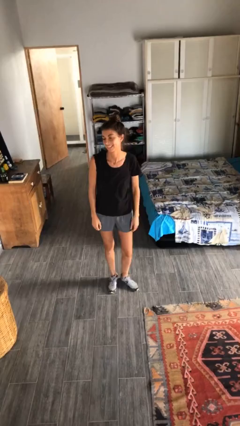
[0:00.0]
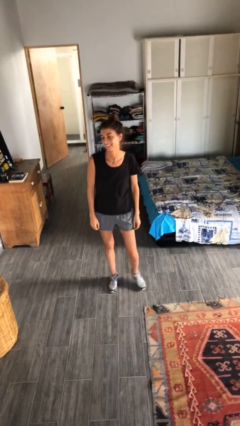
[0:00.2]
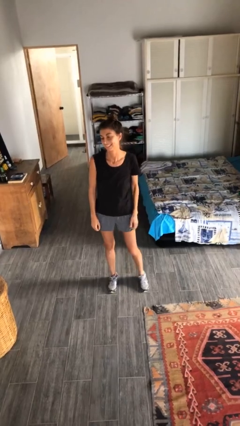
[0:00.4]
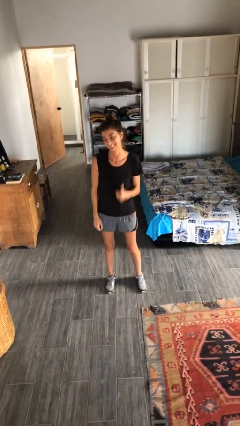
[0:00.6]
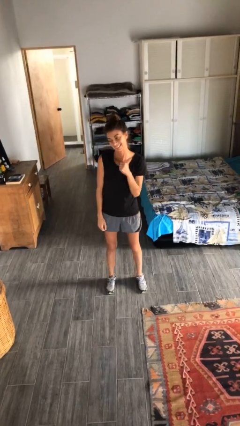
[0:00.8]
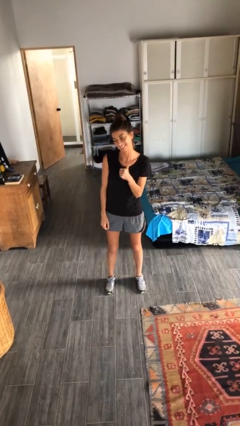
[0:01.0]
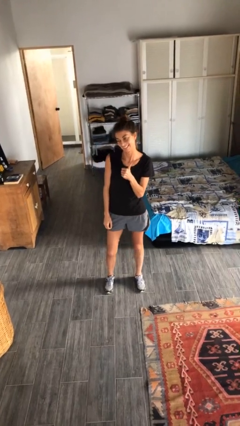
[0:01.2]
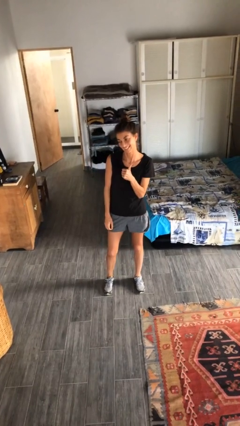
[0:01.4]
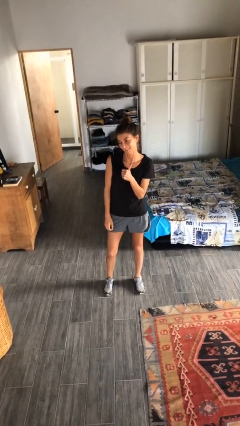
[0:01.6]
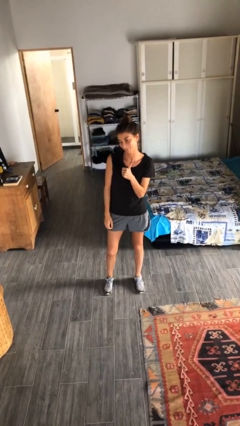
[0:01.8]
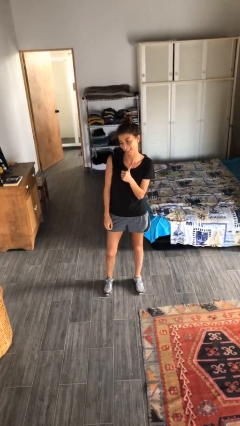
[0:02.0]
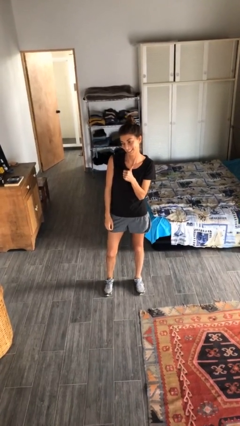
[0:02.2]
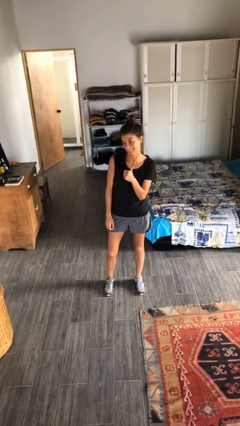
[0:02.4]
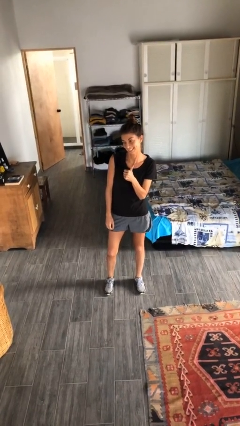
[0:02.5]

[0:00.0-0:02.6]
person gestures thumbs up

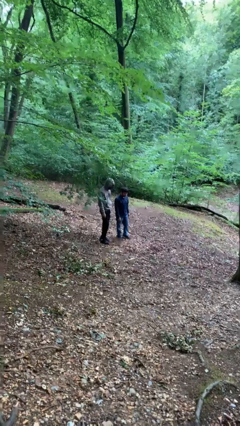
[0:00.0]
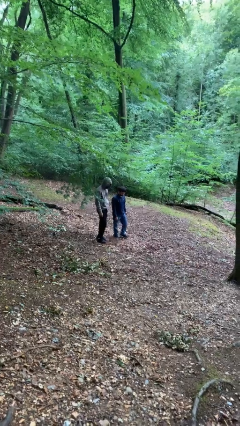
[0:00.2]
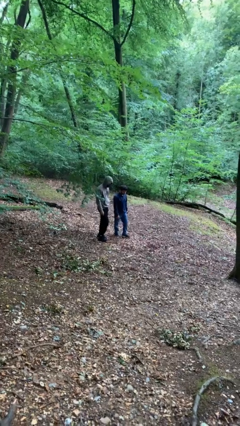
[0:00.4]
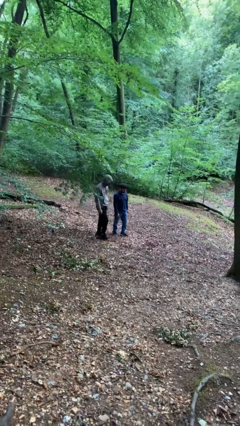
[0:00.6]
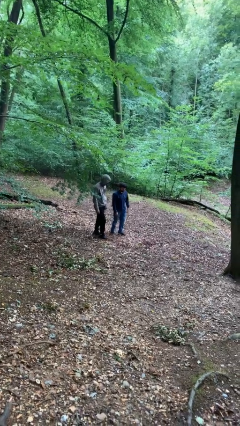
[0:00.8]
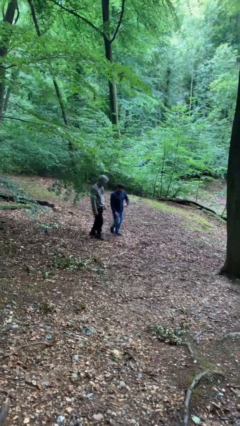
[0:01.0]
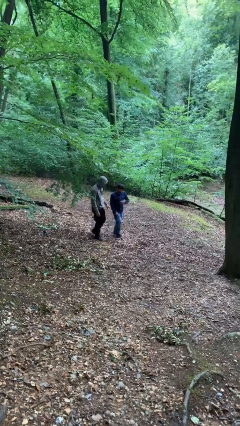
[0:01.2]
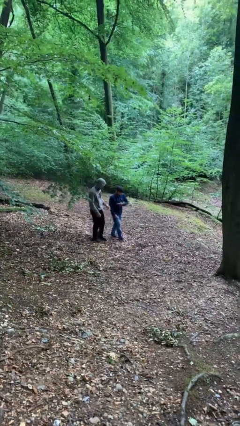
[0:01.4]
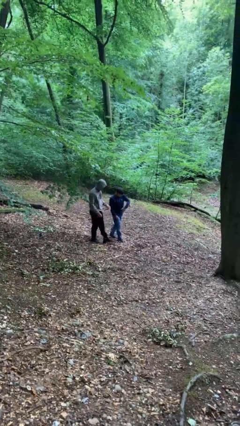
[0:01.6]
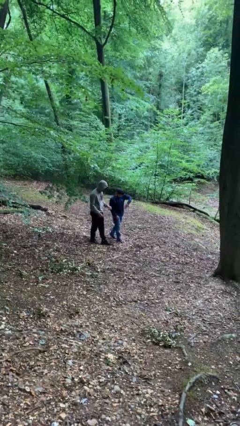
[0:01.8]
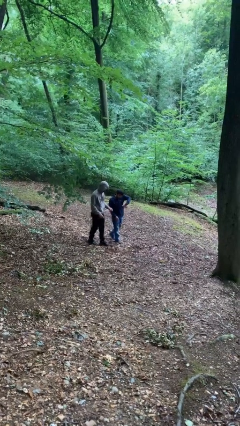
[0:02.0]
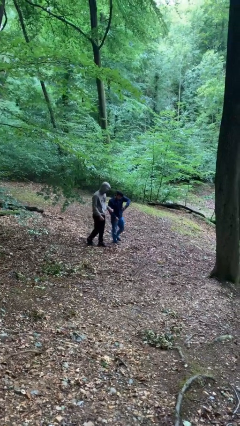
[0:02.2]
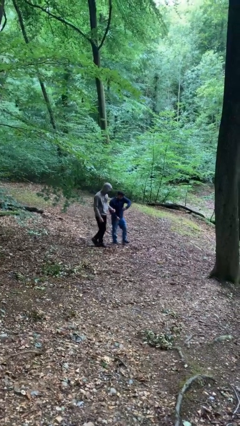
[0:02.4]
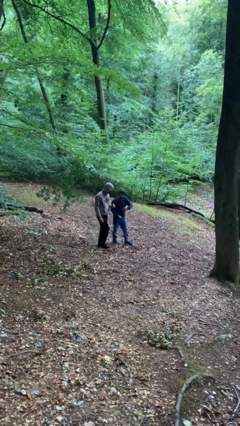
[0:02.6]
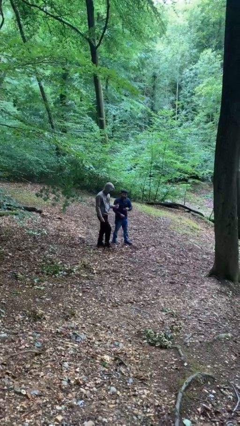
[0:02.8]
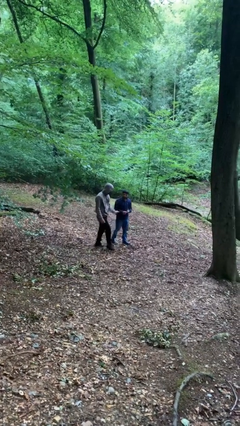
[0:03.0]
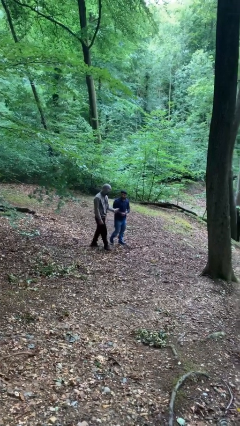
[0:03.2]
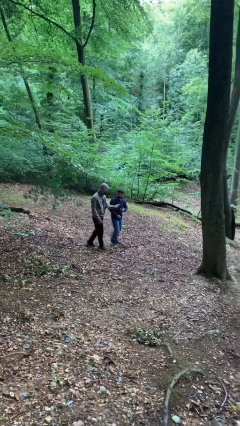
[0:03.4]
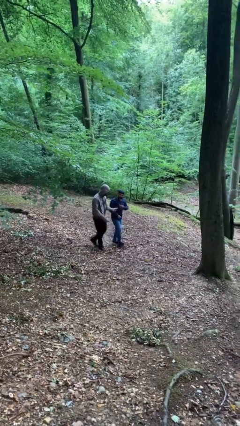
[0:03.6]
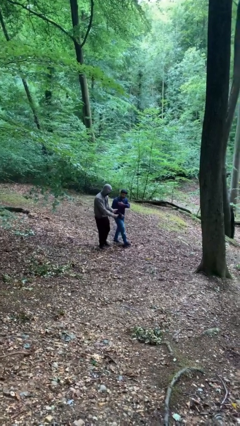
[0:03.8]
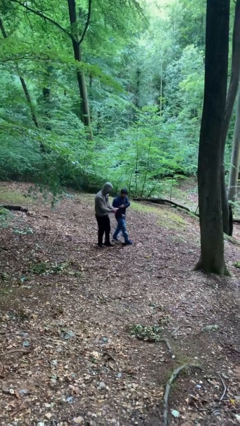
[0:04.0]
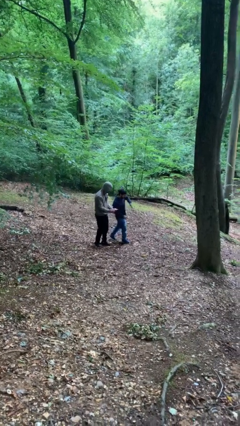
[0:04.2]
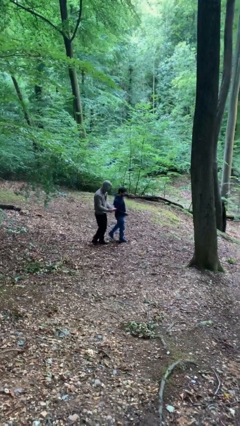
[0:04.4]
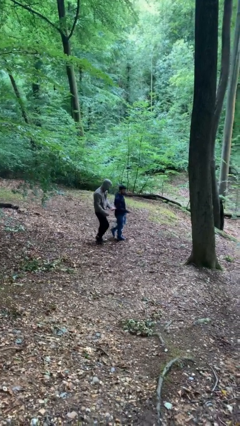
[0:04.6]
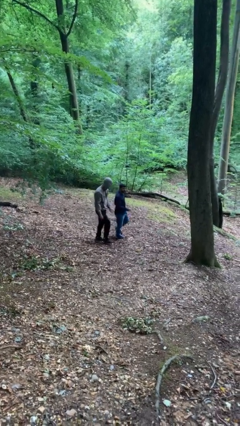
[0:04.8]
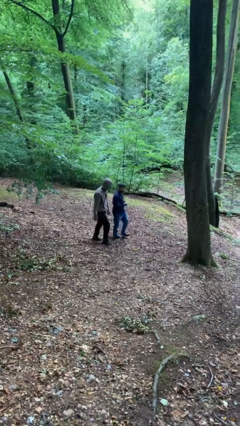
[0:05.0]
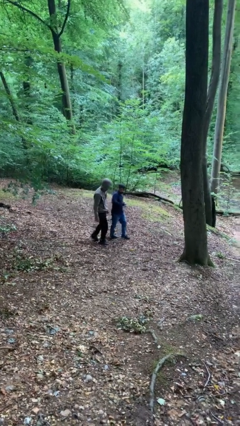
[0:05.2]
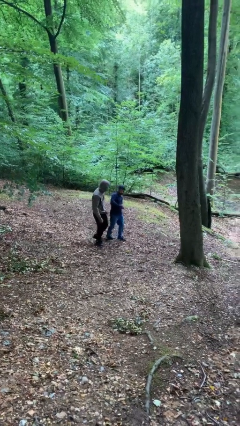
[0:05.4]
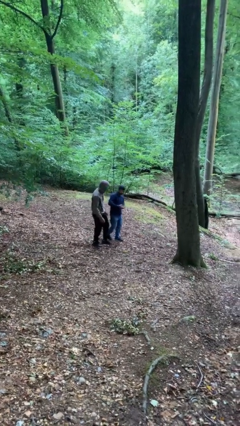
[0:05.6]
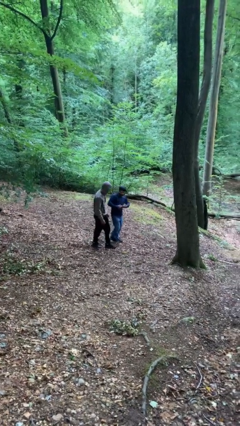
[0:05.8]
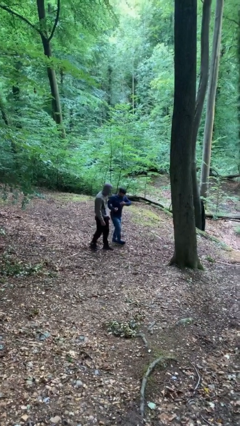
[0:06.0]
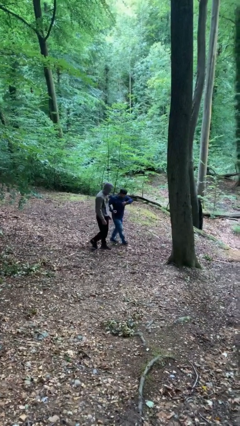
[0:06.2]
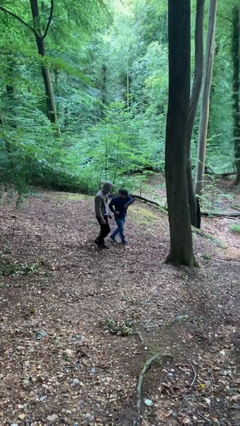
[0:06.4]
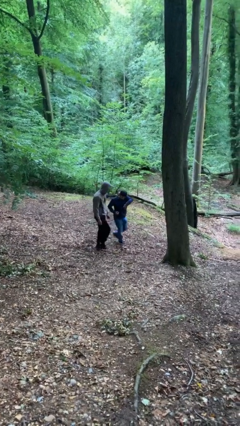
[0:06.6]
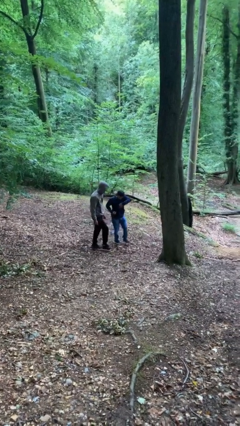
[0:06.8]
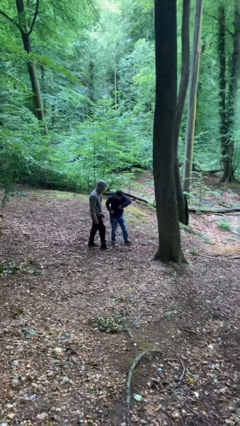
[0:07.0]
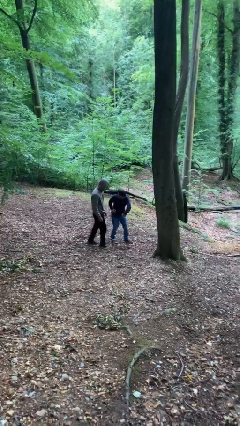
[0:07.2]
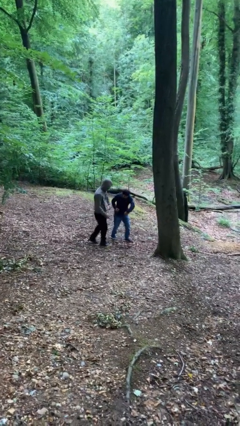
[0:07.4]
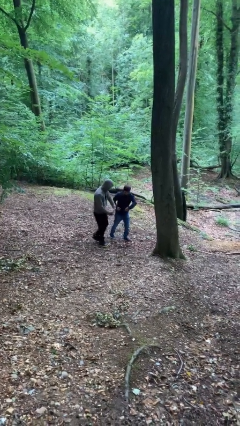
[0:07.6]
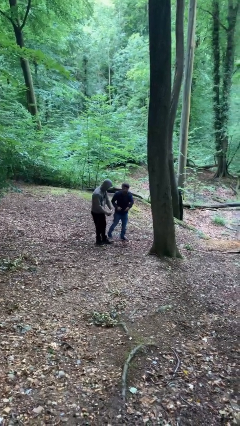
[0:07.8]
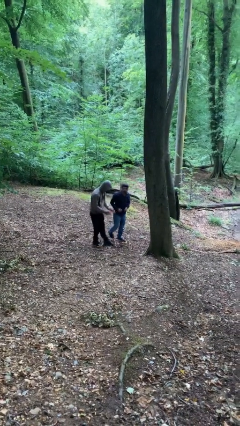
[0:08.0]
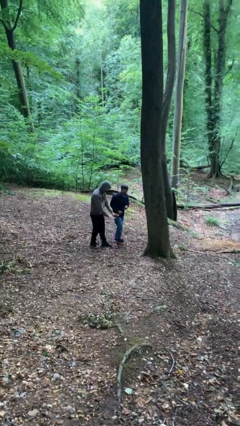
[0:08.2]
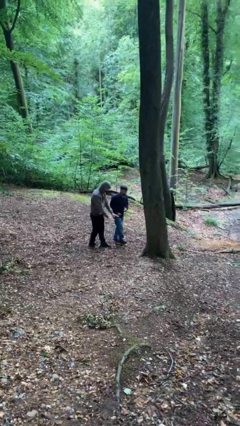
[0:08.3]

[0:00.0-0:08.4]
person talks to person

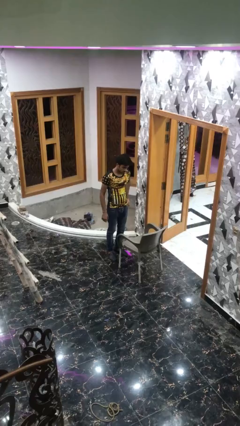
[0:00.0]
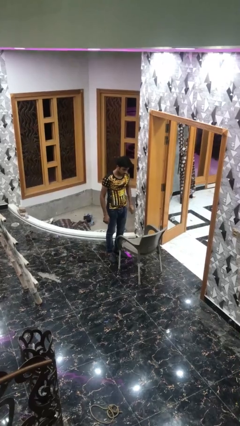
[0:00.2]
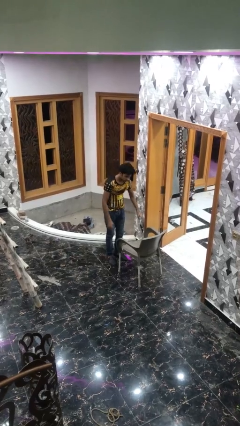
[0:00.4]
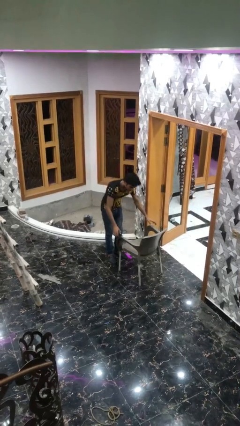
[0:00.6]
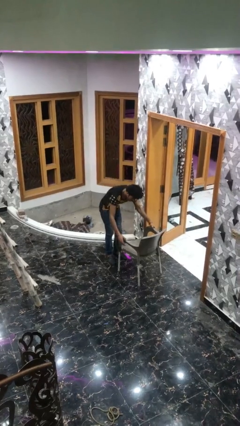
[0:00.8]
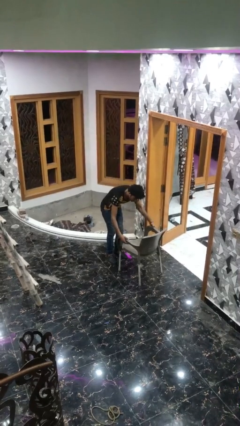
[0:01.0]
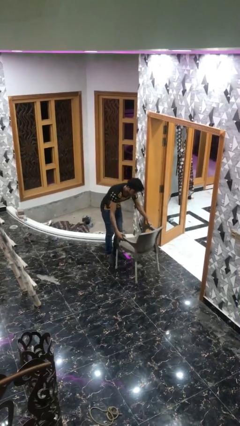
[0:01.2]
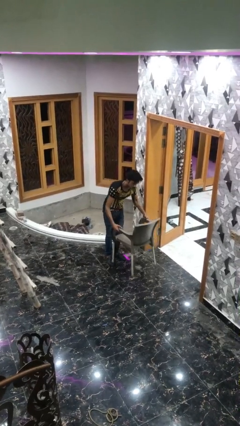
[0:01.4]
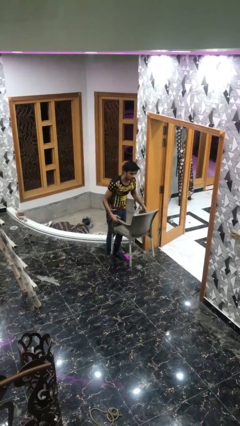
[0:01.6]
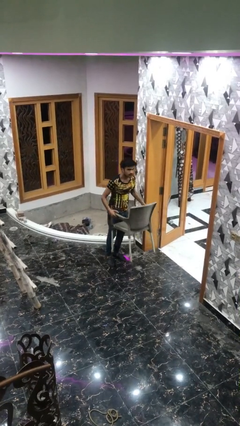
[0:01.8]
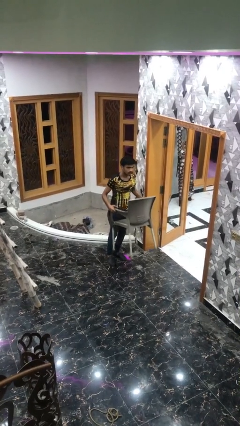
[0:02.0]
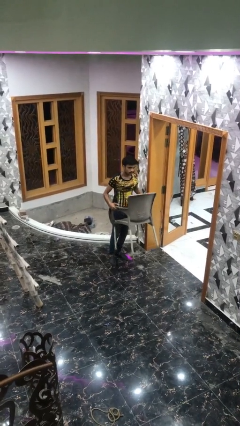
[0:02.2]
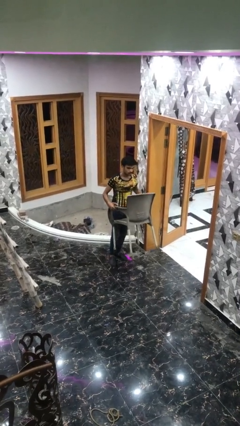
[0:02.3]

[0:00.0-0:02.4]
person picks up object from floor

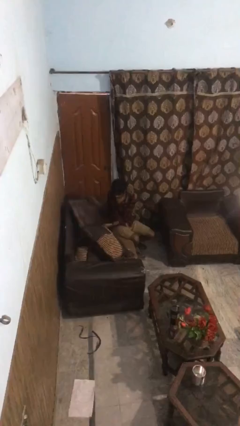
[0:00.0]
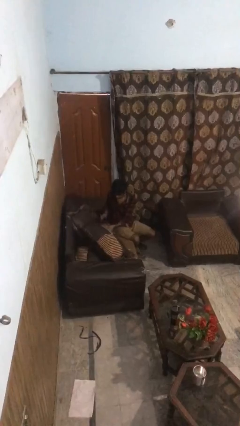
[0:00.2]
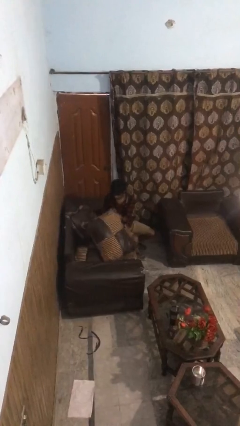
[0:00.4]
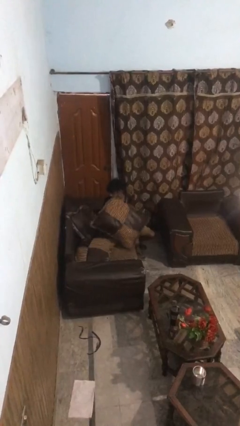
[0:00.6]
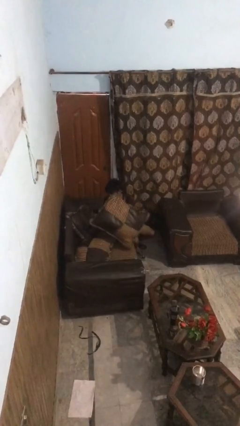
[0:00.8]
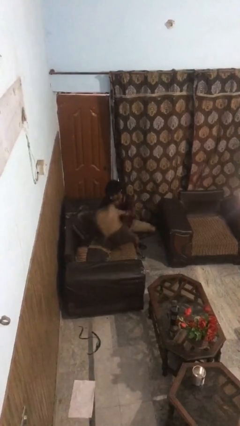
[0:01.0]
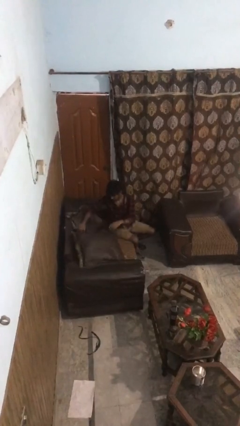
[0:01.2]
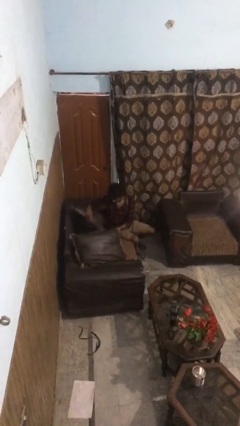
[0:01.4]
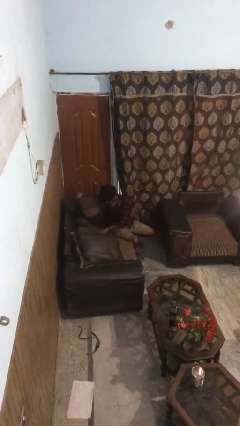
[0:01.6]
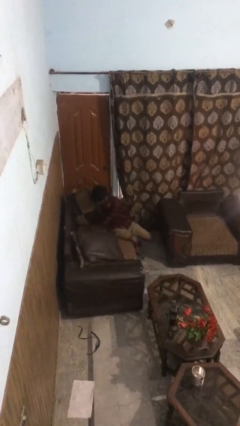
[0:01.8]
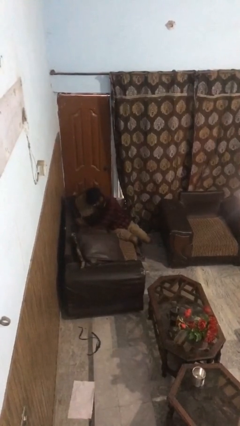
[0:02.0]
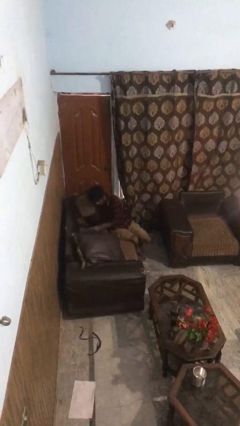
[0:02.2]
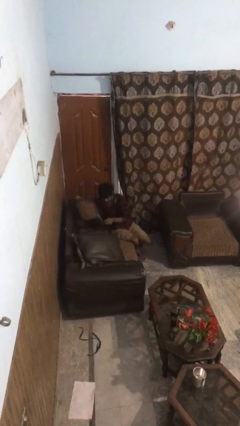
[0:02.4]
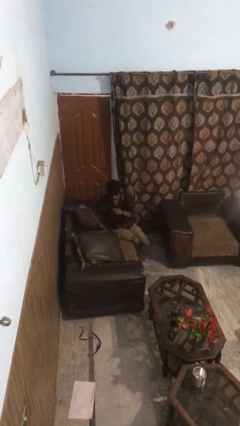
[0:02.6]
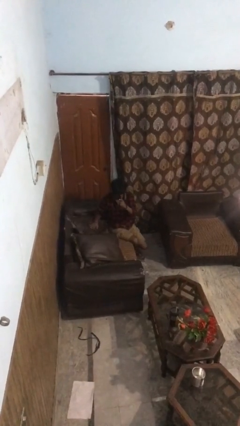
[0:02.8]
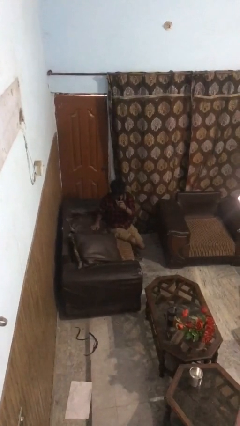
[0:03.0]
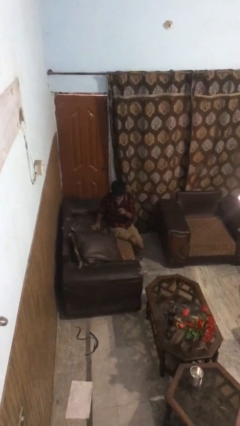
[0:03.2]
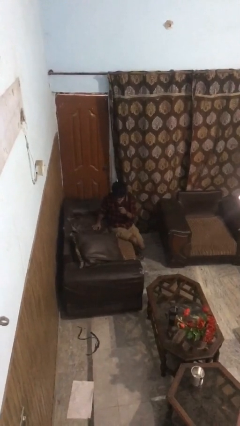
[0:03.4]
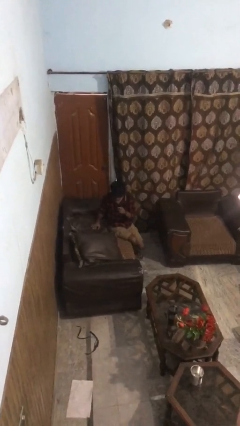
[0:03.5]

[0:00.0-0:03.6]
person searches in couch

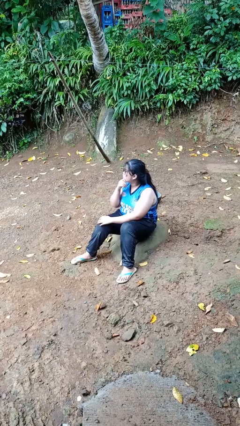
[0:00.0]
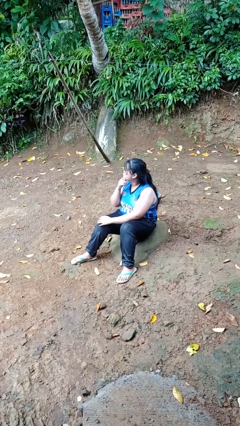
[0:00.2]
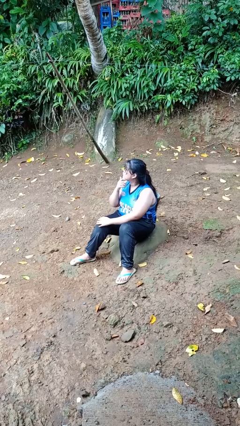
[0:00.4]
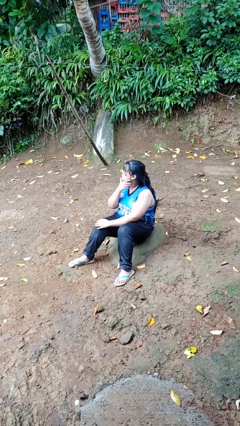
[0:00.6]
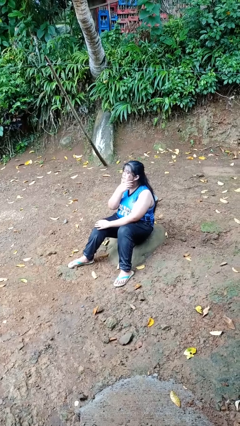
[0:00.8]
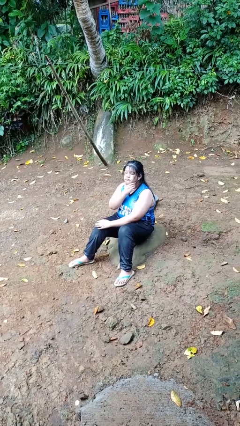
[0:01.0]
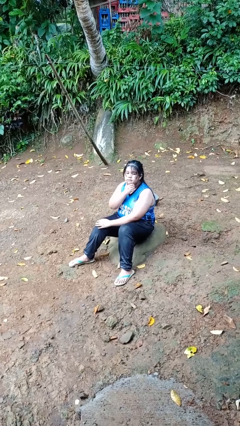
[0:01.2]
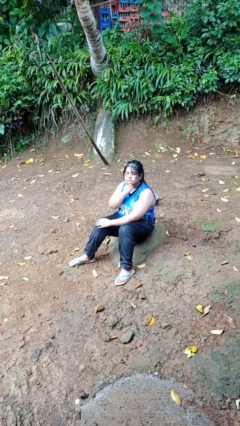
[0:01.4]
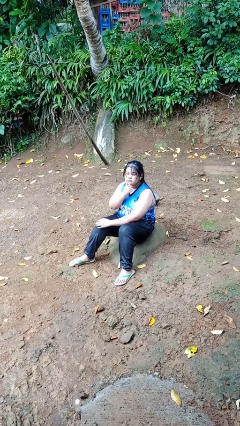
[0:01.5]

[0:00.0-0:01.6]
person strokes chin
